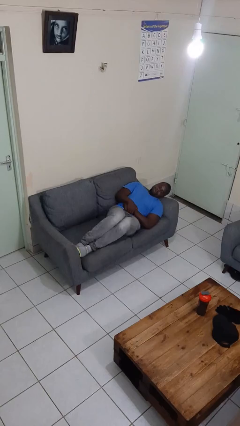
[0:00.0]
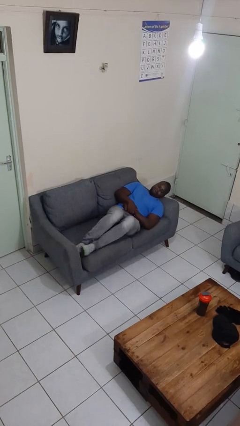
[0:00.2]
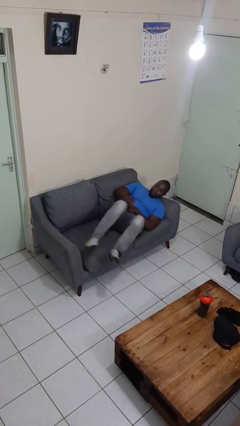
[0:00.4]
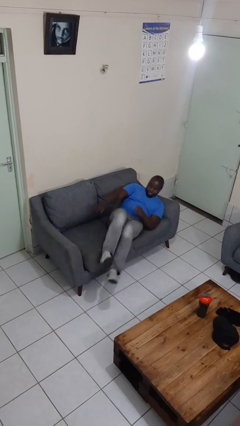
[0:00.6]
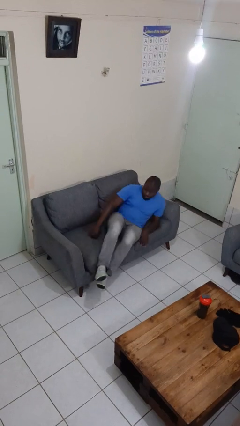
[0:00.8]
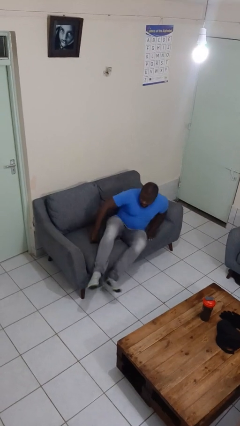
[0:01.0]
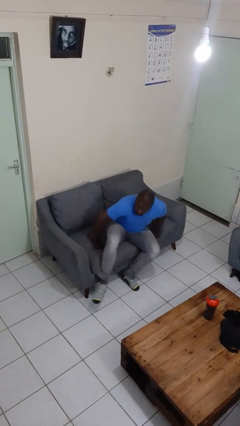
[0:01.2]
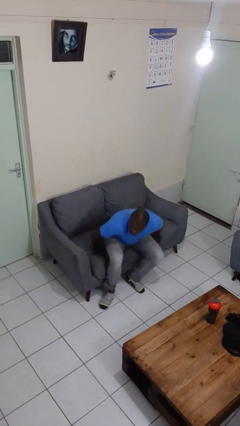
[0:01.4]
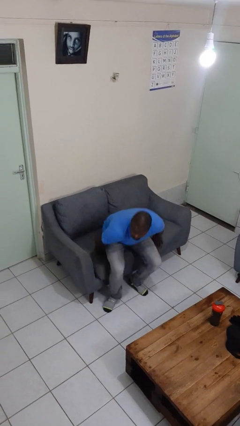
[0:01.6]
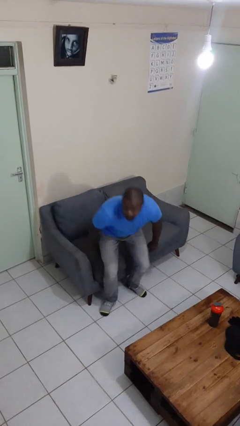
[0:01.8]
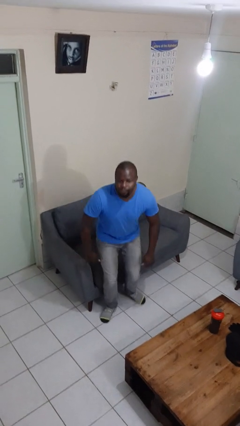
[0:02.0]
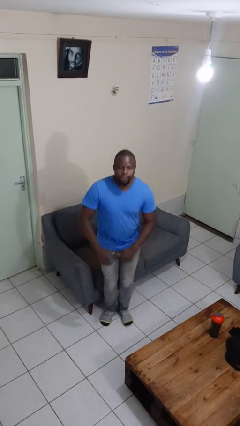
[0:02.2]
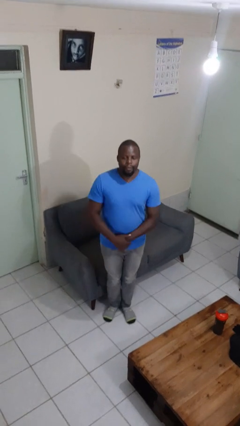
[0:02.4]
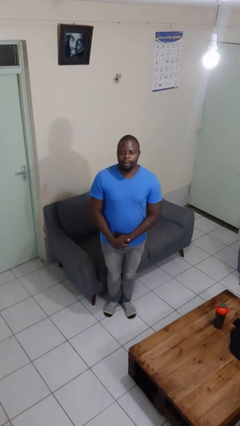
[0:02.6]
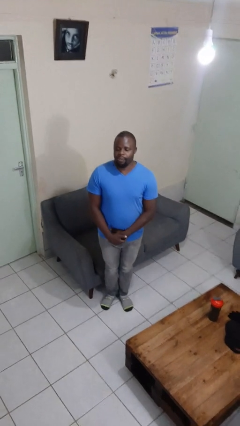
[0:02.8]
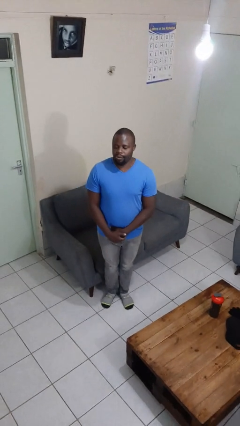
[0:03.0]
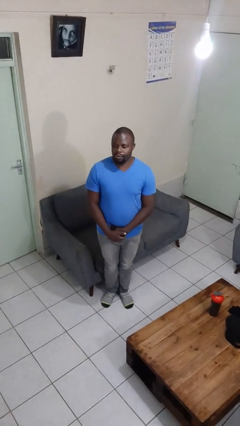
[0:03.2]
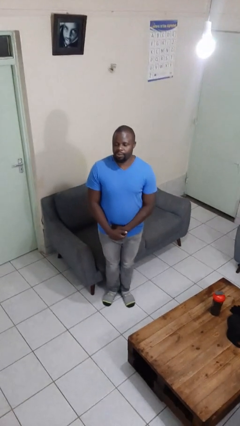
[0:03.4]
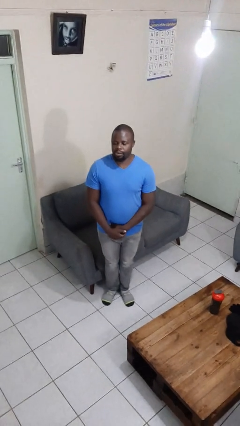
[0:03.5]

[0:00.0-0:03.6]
person stands up

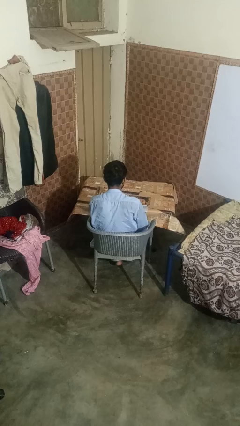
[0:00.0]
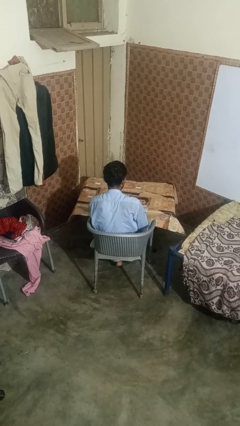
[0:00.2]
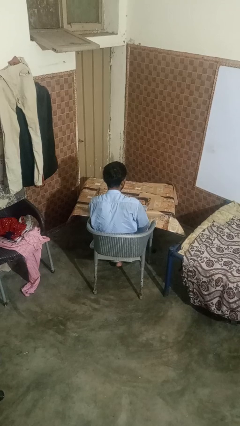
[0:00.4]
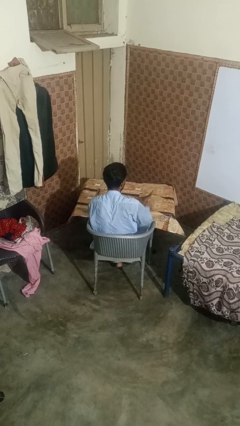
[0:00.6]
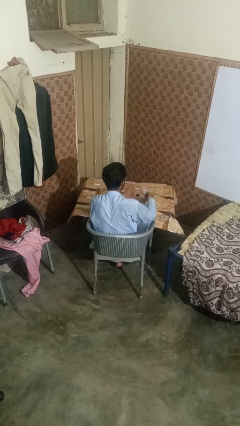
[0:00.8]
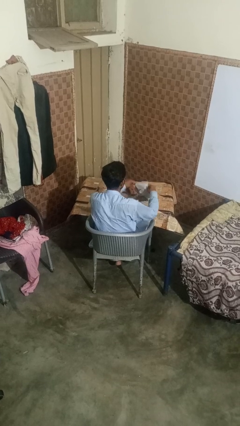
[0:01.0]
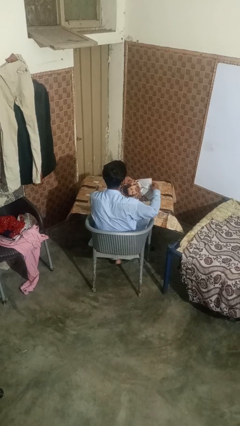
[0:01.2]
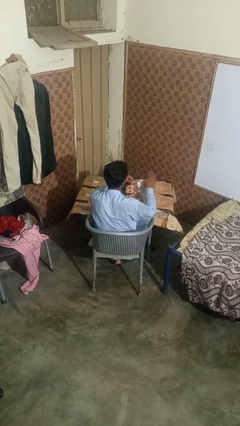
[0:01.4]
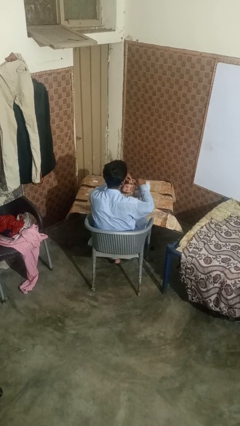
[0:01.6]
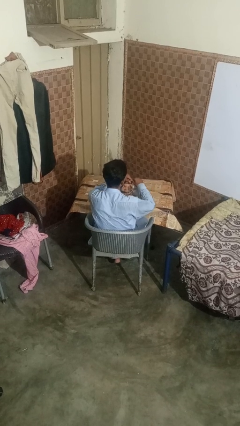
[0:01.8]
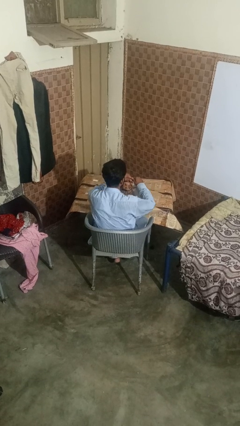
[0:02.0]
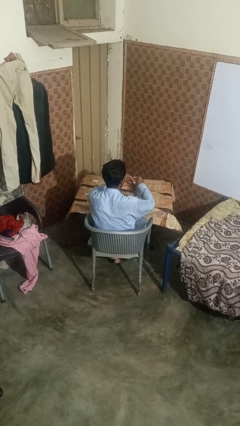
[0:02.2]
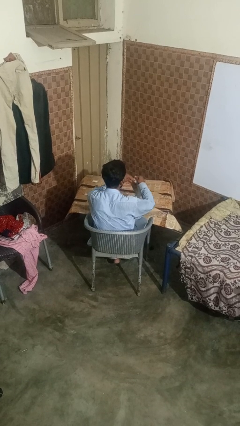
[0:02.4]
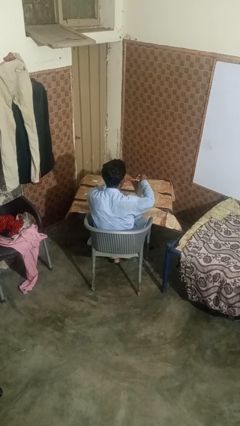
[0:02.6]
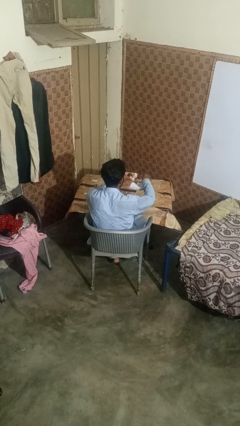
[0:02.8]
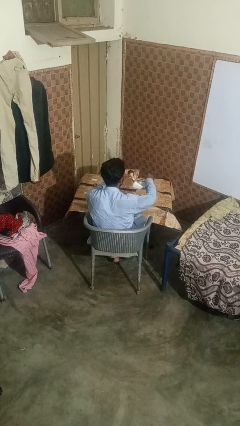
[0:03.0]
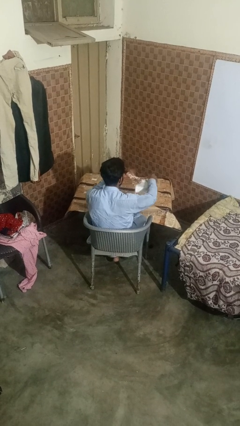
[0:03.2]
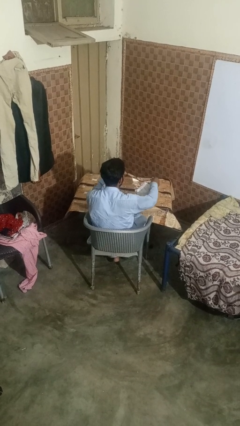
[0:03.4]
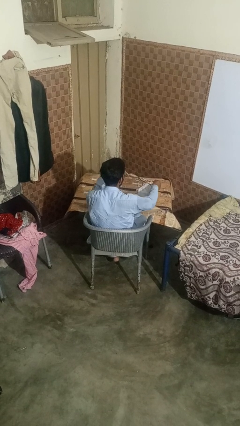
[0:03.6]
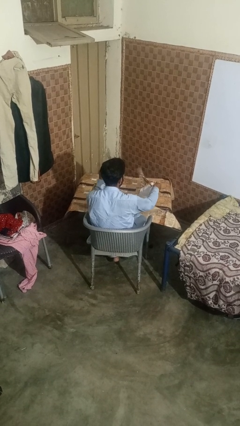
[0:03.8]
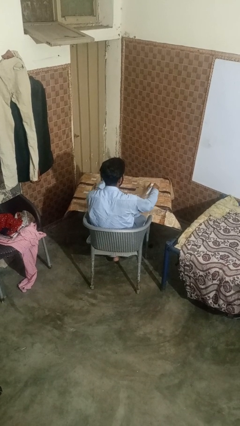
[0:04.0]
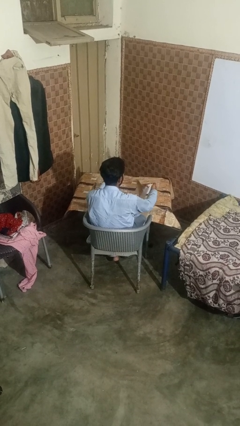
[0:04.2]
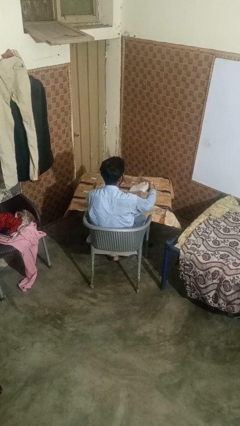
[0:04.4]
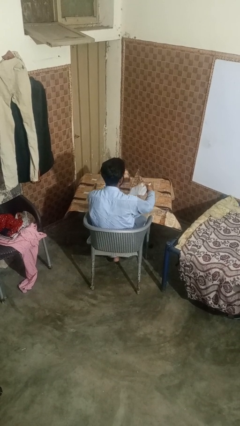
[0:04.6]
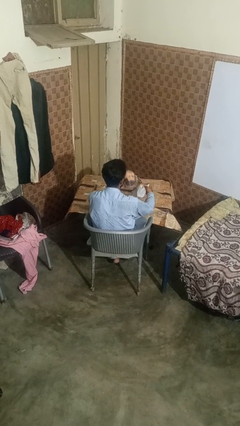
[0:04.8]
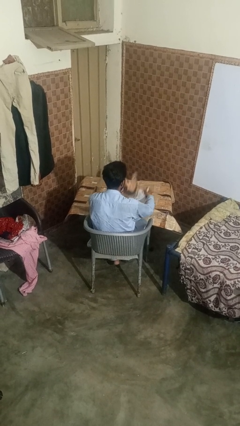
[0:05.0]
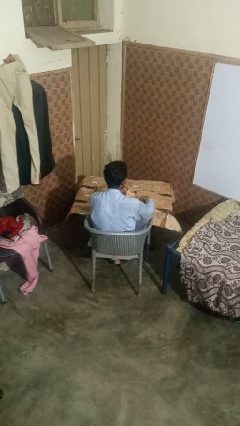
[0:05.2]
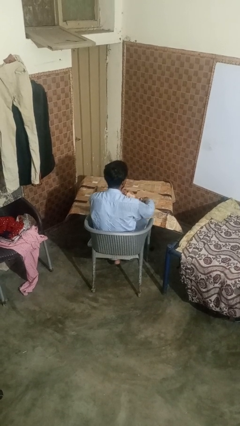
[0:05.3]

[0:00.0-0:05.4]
person tears paper

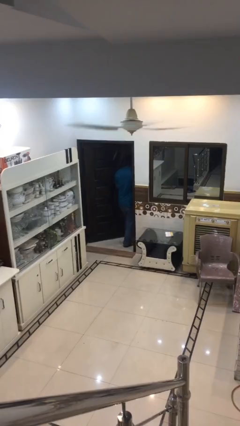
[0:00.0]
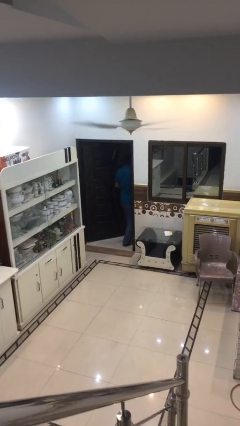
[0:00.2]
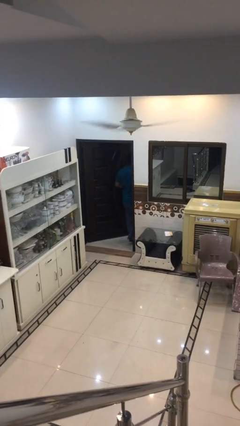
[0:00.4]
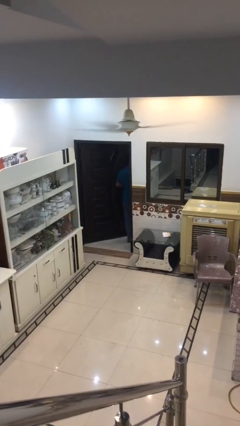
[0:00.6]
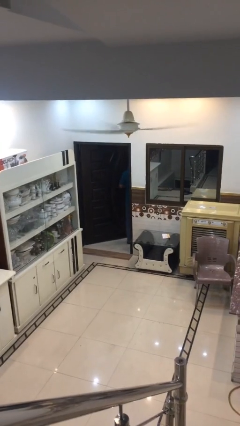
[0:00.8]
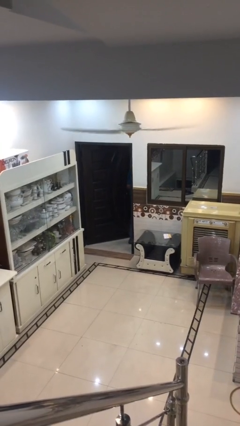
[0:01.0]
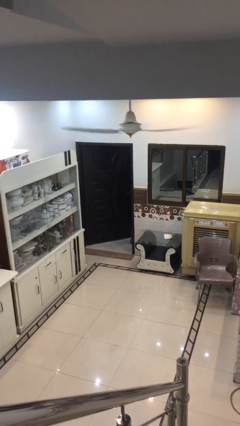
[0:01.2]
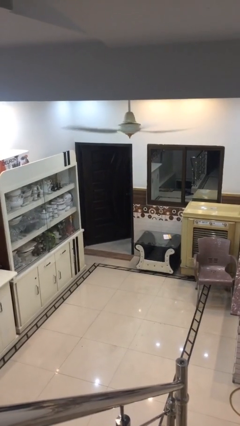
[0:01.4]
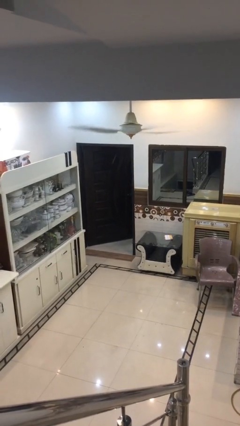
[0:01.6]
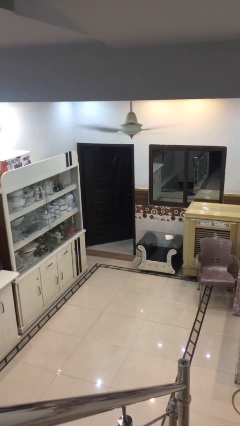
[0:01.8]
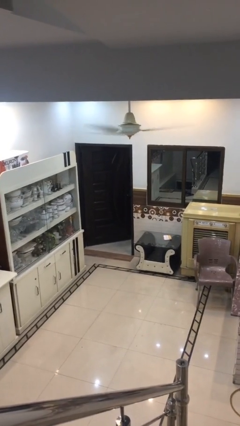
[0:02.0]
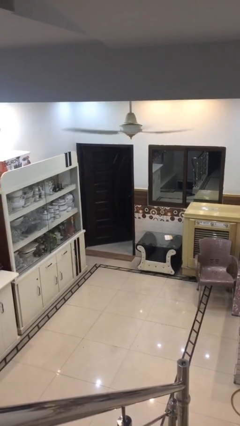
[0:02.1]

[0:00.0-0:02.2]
person exits scene through structure

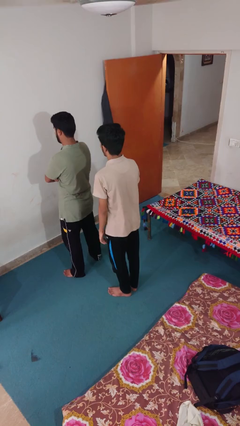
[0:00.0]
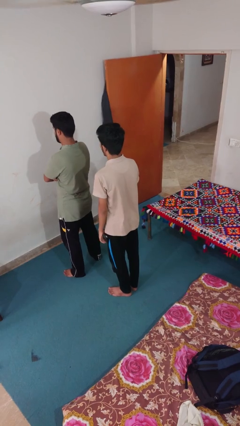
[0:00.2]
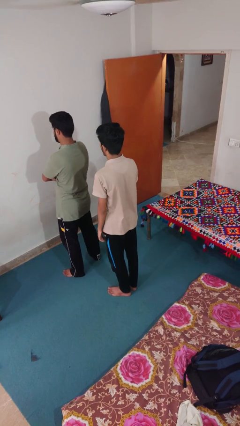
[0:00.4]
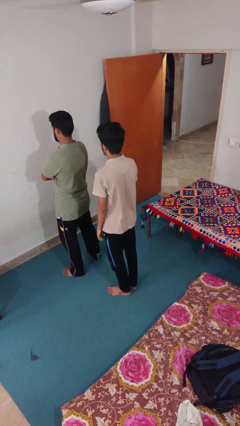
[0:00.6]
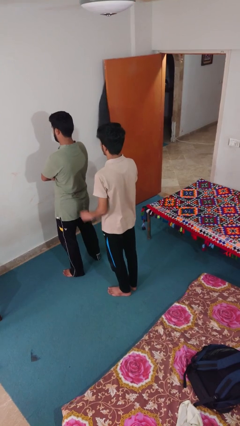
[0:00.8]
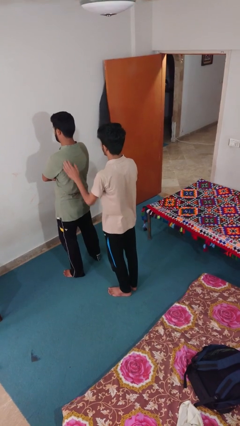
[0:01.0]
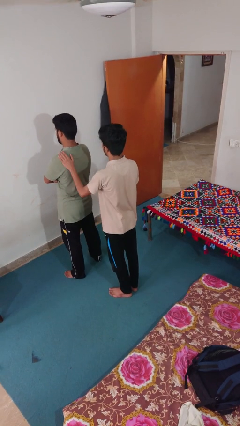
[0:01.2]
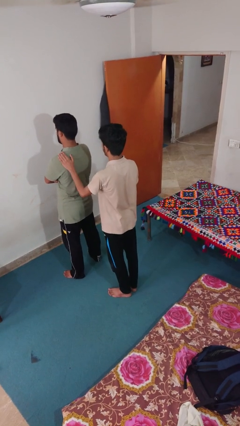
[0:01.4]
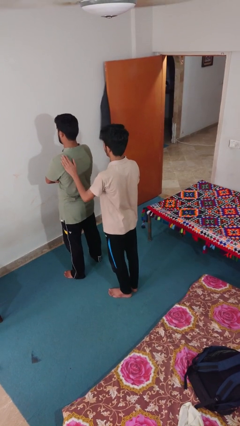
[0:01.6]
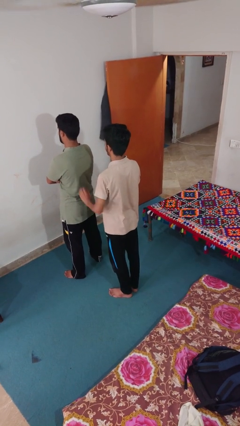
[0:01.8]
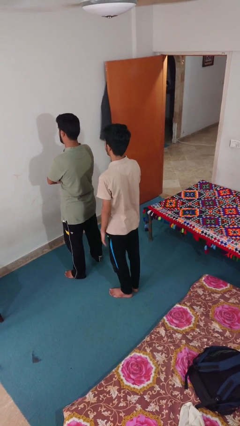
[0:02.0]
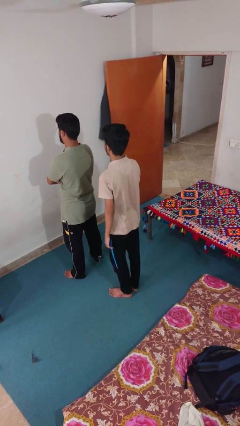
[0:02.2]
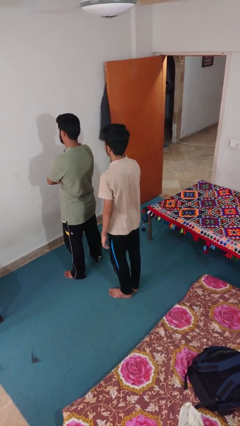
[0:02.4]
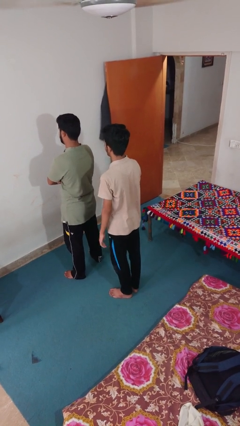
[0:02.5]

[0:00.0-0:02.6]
person touches back of person

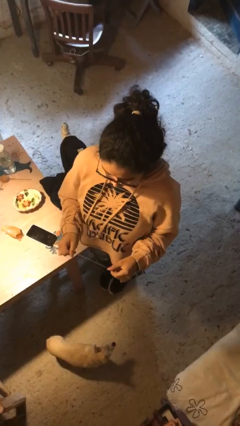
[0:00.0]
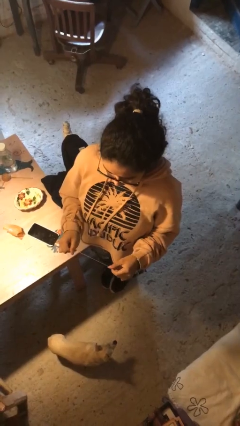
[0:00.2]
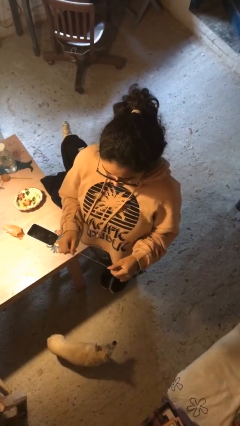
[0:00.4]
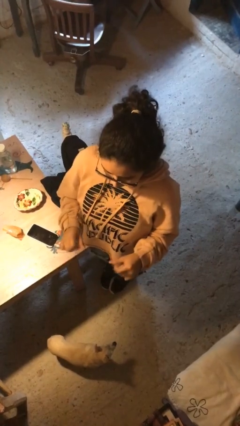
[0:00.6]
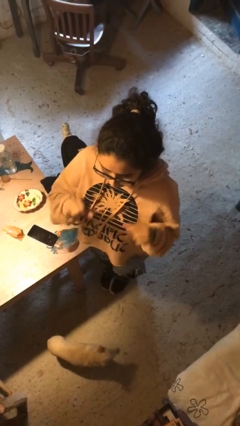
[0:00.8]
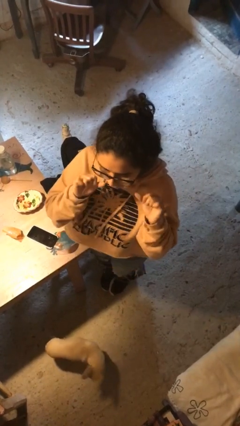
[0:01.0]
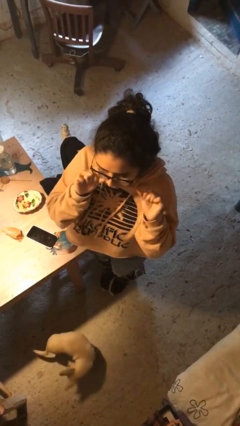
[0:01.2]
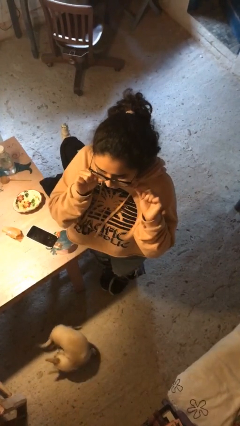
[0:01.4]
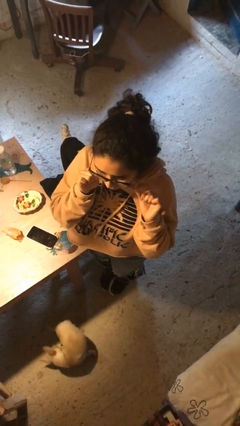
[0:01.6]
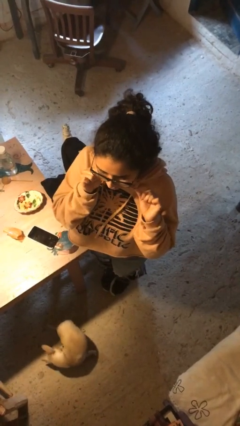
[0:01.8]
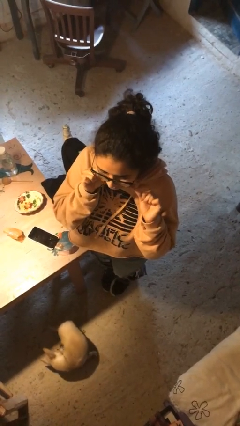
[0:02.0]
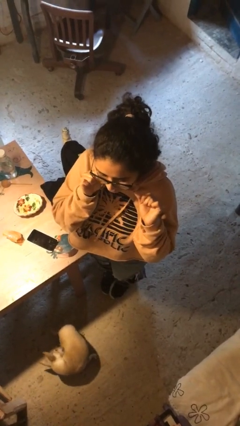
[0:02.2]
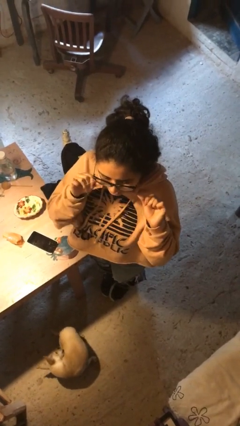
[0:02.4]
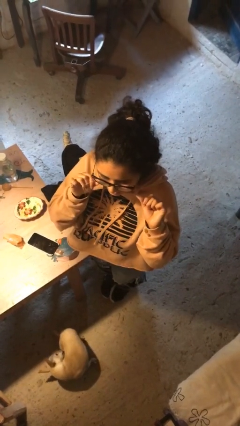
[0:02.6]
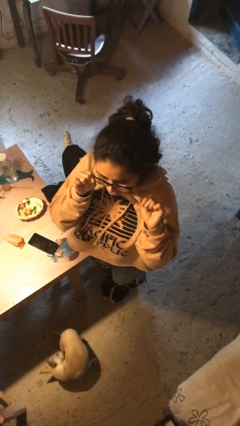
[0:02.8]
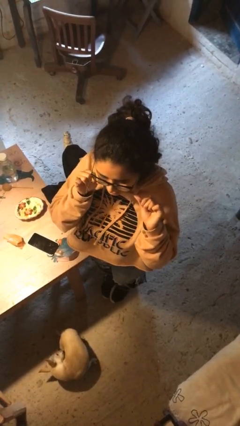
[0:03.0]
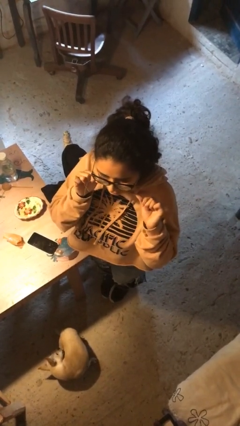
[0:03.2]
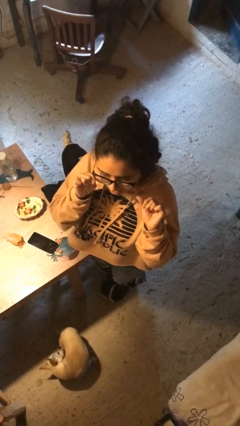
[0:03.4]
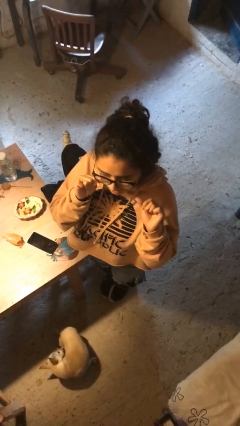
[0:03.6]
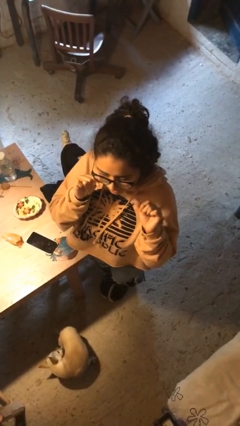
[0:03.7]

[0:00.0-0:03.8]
person flosses
